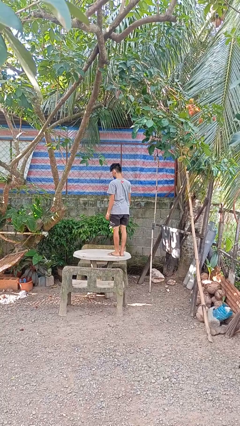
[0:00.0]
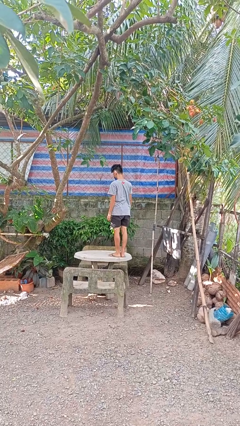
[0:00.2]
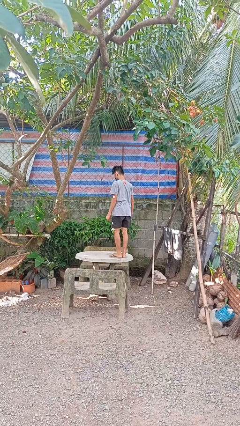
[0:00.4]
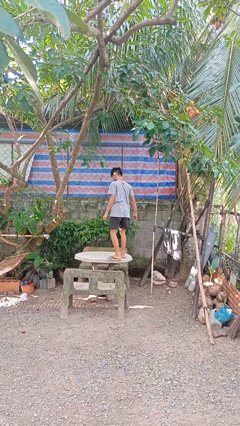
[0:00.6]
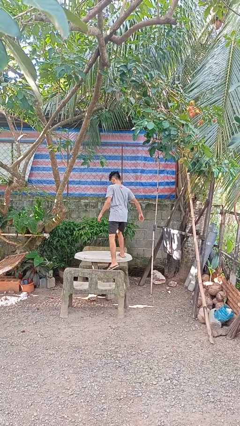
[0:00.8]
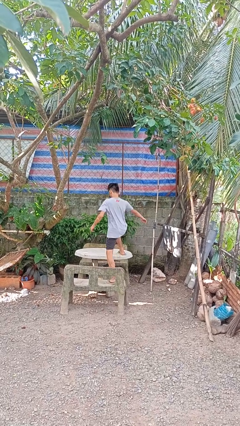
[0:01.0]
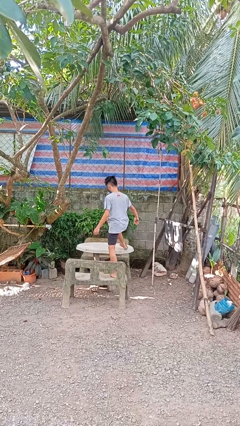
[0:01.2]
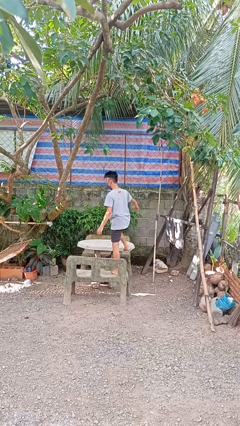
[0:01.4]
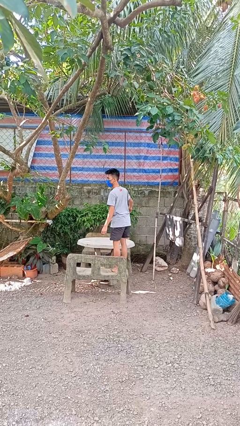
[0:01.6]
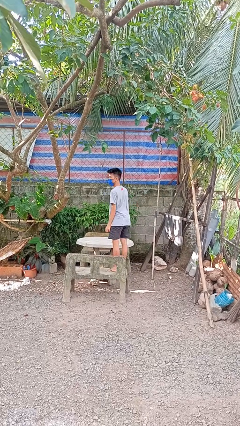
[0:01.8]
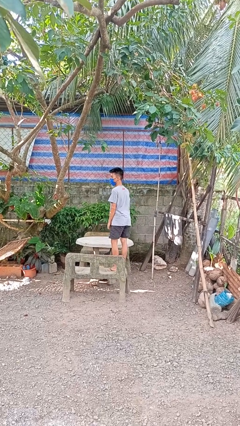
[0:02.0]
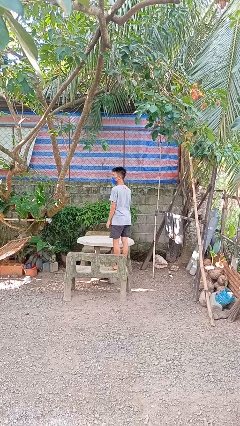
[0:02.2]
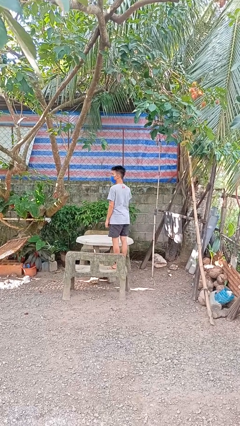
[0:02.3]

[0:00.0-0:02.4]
person climbs off table

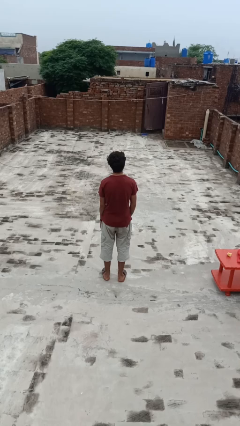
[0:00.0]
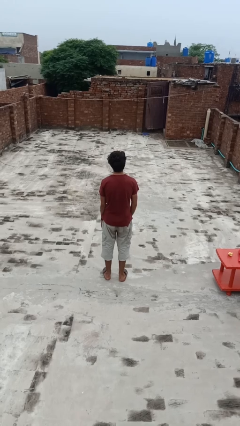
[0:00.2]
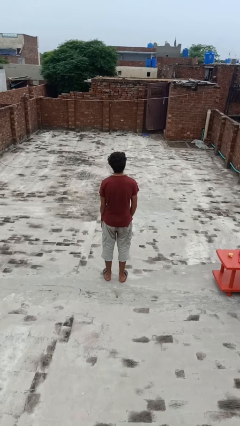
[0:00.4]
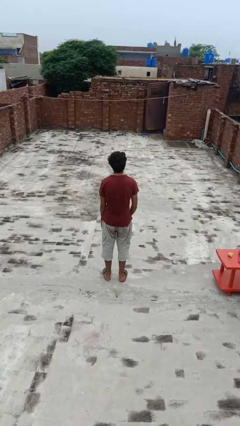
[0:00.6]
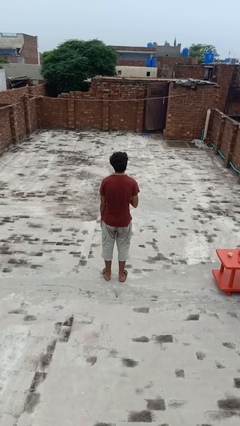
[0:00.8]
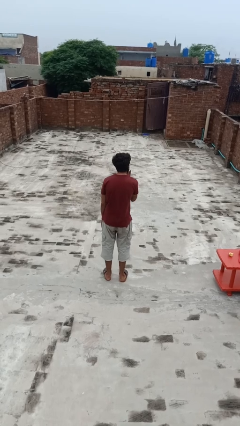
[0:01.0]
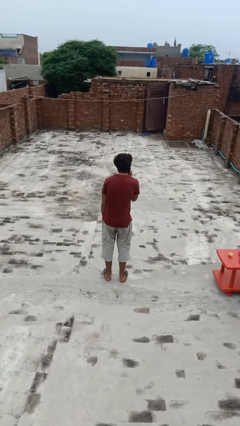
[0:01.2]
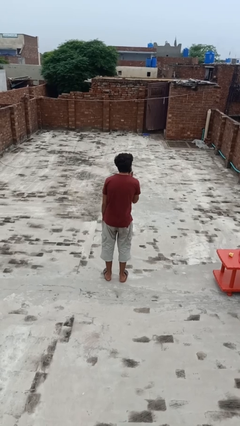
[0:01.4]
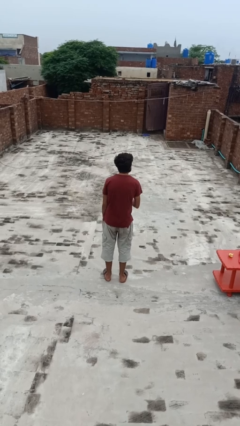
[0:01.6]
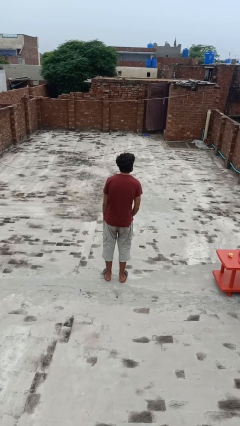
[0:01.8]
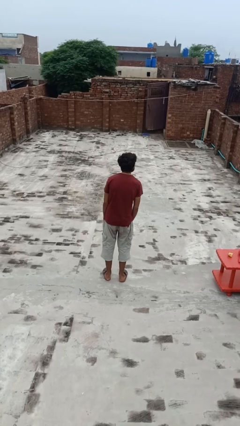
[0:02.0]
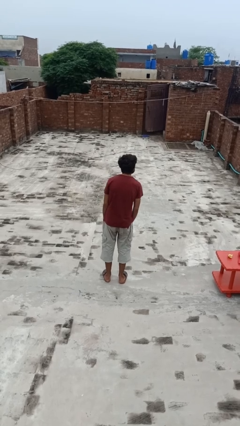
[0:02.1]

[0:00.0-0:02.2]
person gestures blow kiss

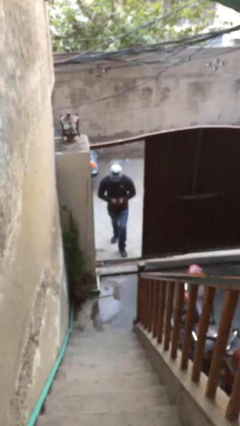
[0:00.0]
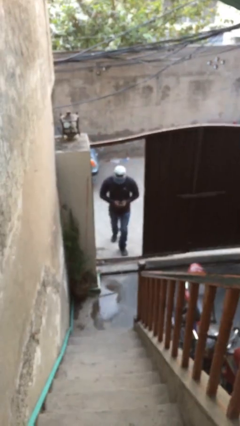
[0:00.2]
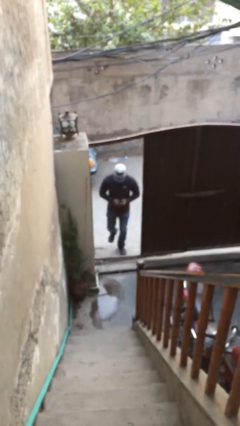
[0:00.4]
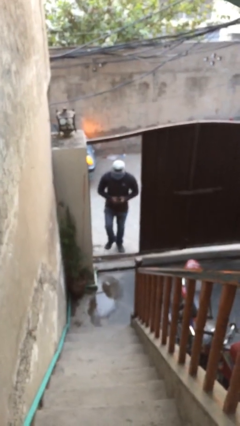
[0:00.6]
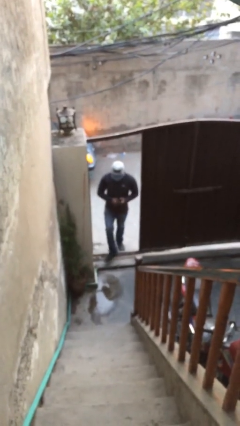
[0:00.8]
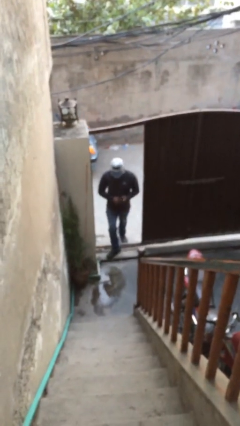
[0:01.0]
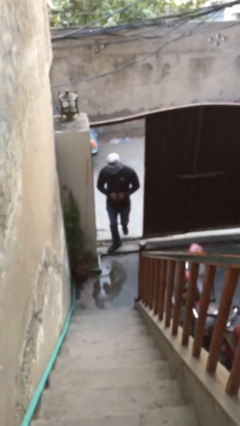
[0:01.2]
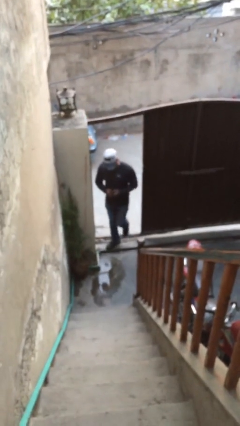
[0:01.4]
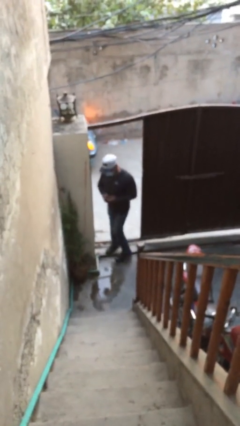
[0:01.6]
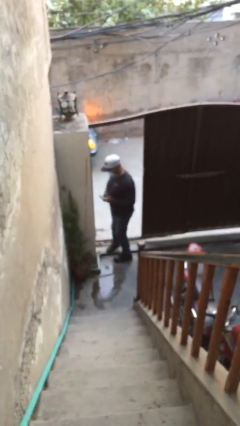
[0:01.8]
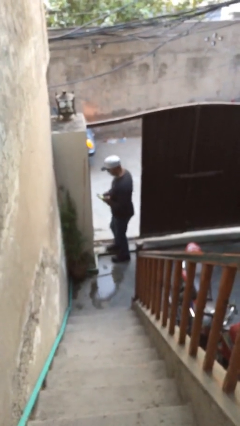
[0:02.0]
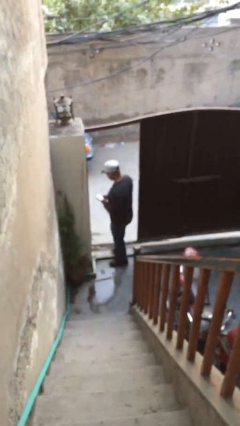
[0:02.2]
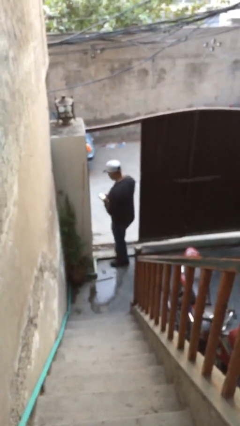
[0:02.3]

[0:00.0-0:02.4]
person enters scene through structure

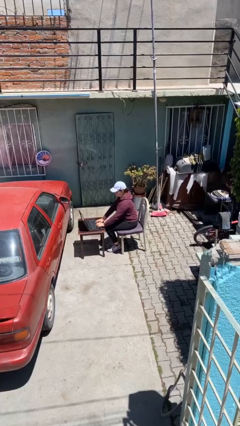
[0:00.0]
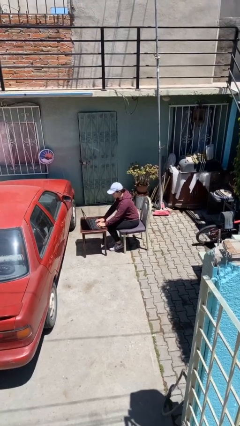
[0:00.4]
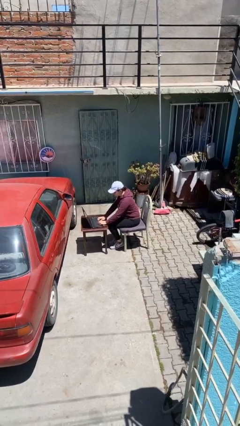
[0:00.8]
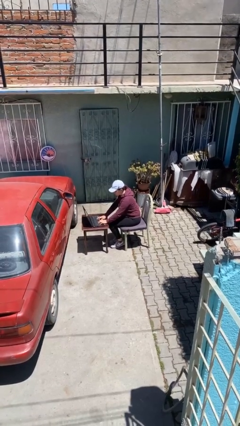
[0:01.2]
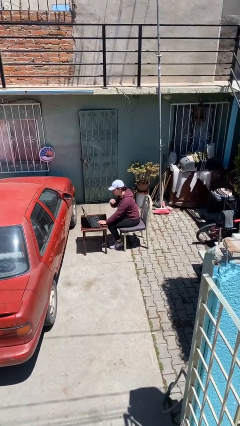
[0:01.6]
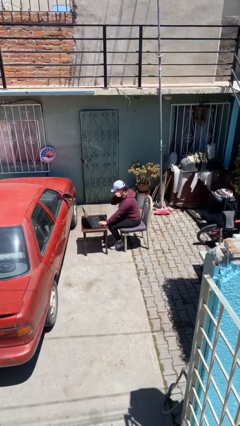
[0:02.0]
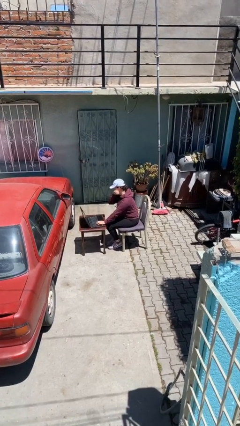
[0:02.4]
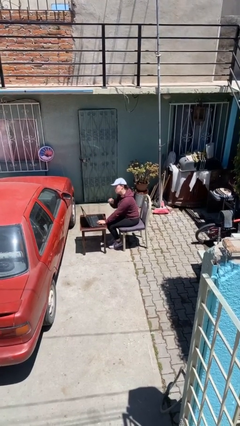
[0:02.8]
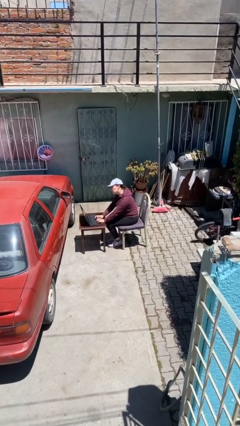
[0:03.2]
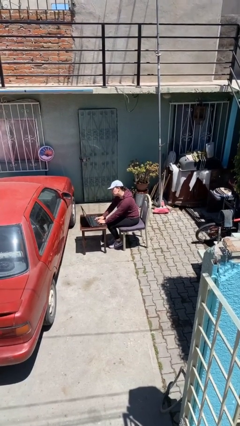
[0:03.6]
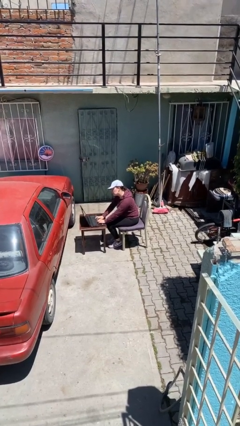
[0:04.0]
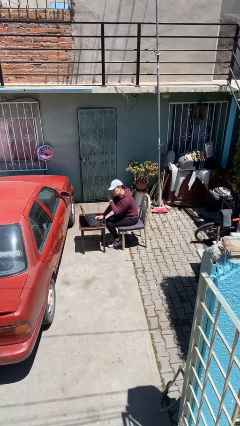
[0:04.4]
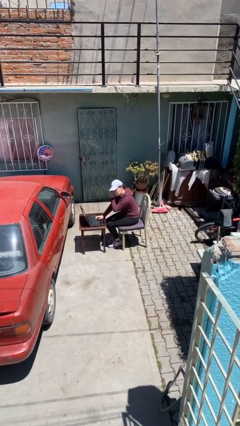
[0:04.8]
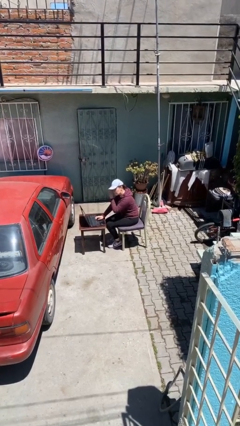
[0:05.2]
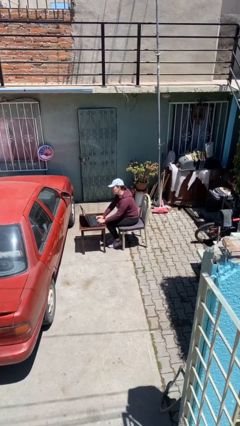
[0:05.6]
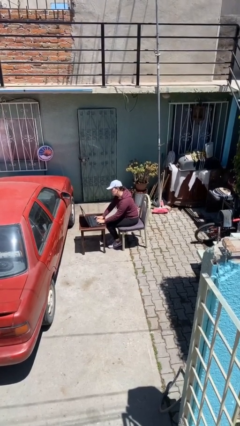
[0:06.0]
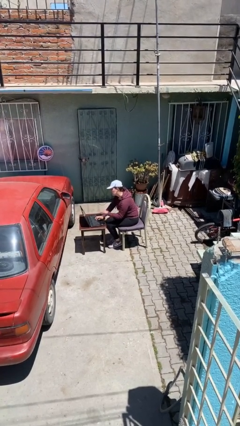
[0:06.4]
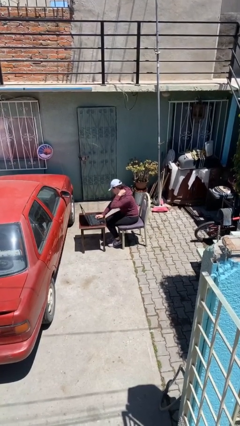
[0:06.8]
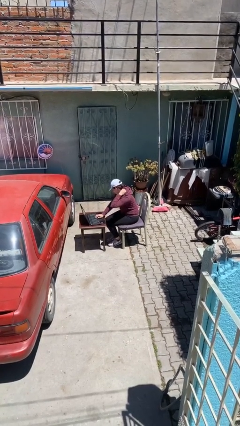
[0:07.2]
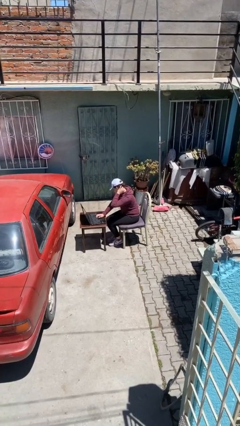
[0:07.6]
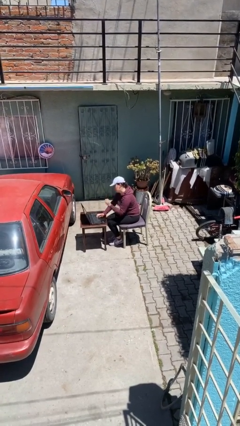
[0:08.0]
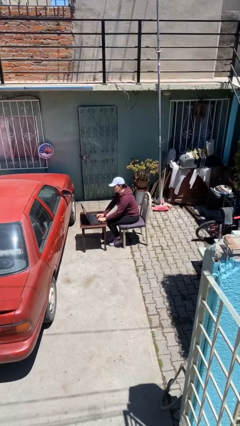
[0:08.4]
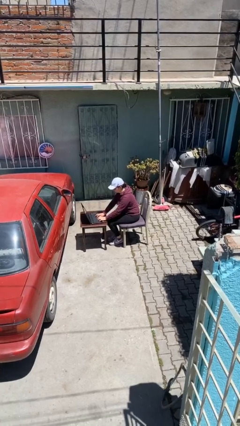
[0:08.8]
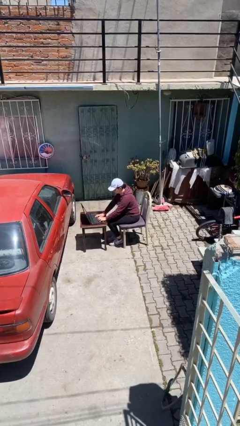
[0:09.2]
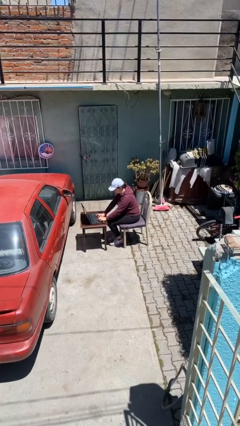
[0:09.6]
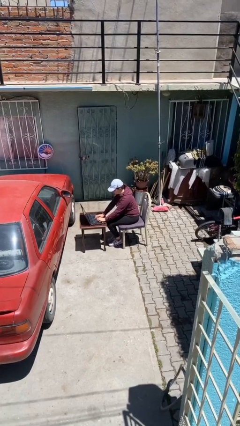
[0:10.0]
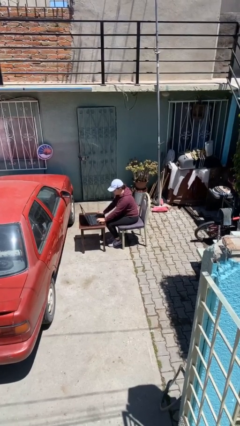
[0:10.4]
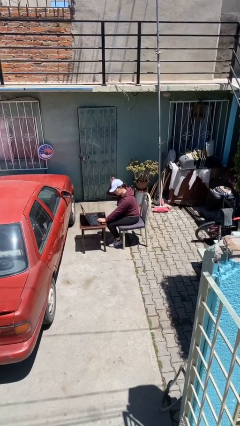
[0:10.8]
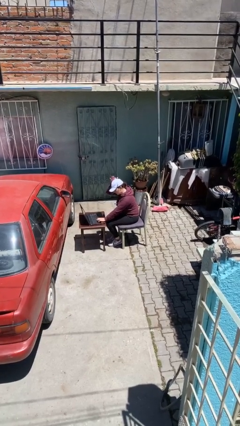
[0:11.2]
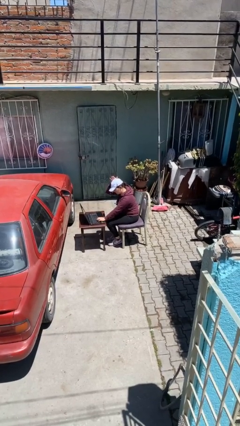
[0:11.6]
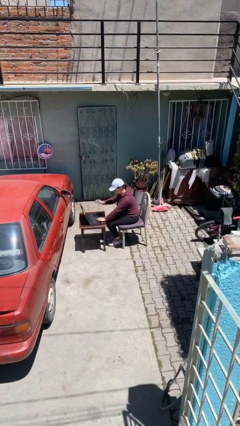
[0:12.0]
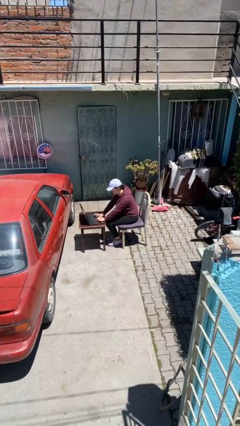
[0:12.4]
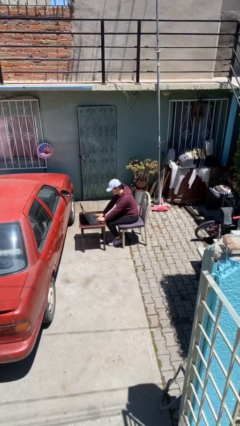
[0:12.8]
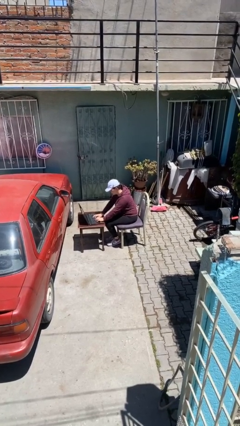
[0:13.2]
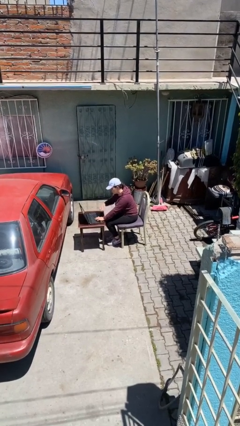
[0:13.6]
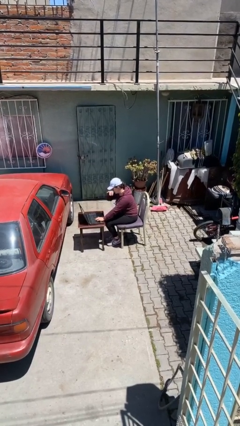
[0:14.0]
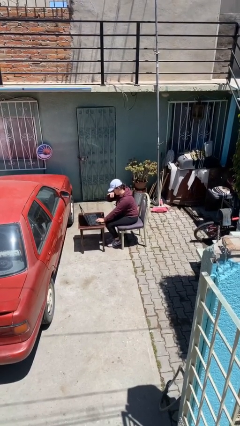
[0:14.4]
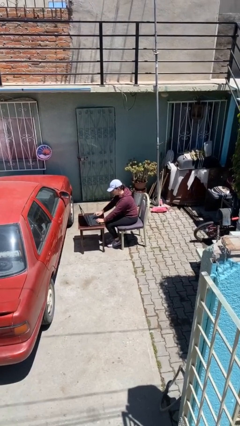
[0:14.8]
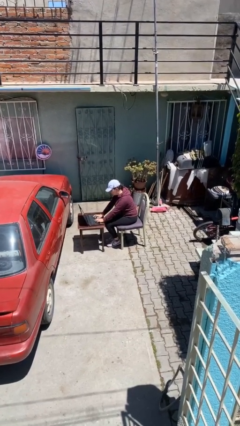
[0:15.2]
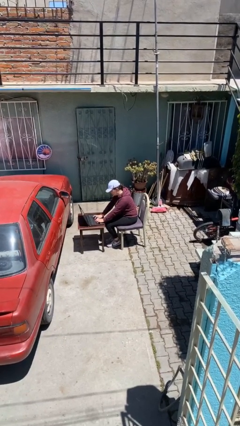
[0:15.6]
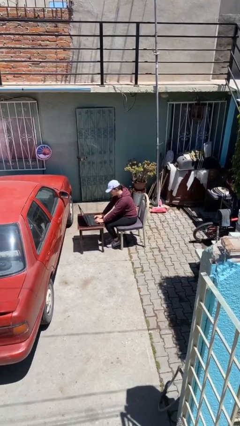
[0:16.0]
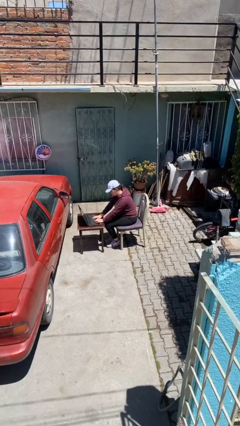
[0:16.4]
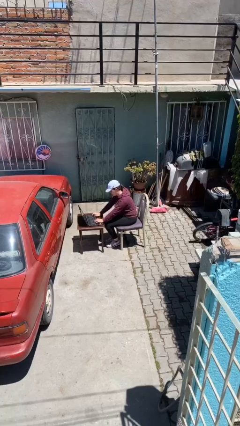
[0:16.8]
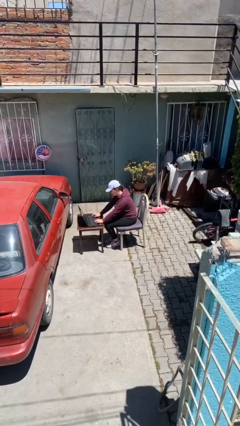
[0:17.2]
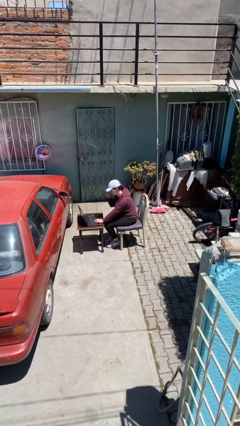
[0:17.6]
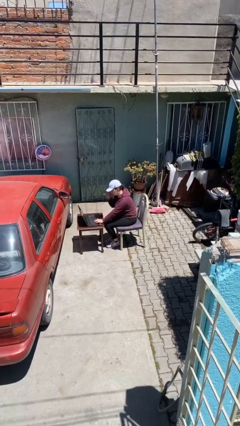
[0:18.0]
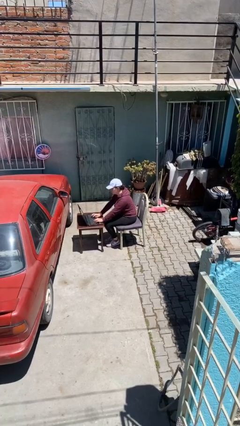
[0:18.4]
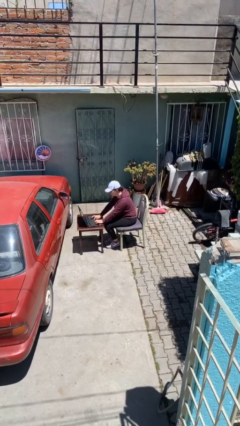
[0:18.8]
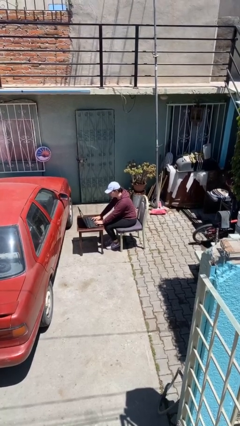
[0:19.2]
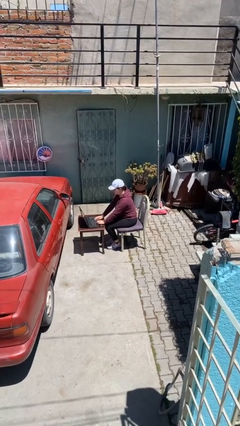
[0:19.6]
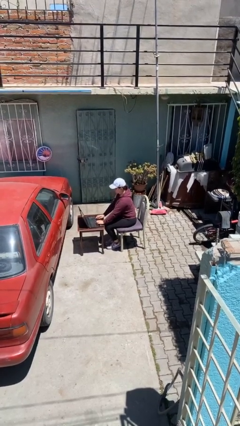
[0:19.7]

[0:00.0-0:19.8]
person interacts with laptop

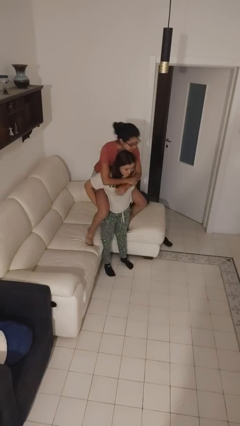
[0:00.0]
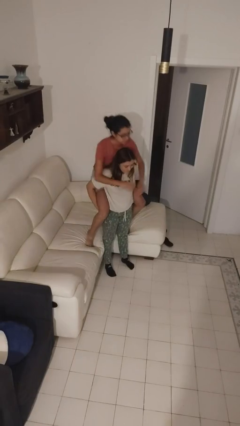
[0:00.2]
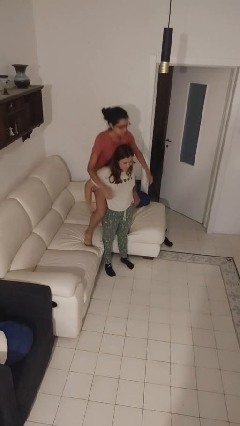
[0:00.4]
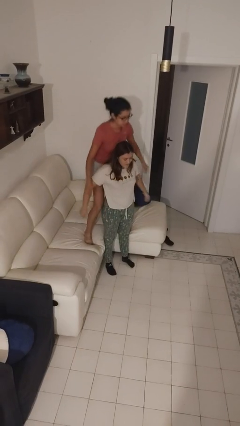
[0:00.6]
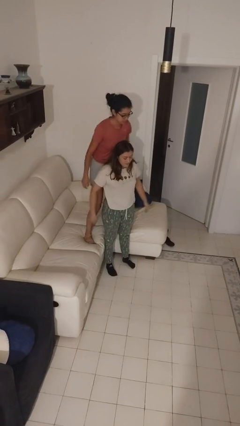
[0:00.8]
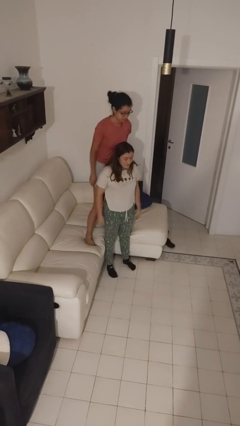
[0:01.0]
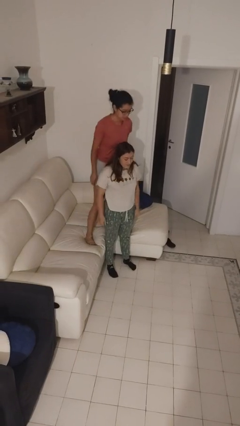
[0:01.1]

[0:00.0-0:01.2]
person puts down person
